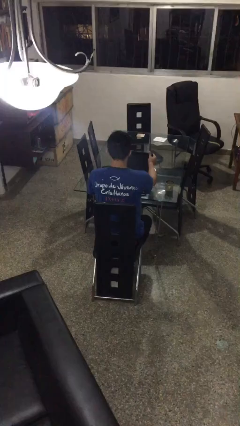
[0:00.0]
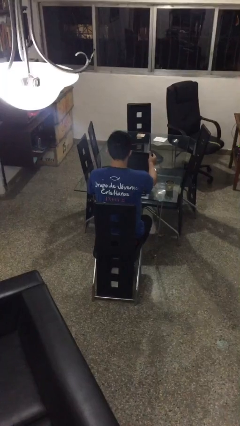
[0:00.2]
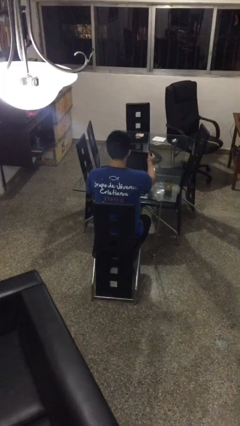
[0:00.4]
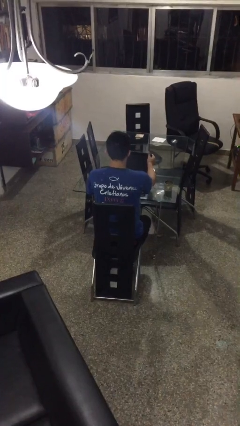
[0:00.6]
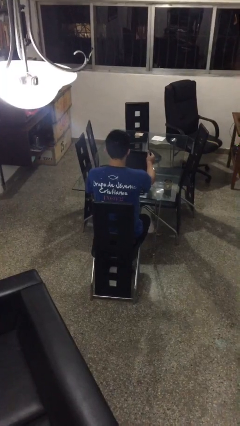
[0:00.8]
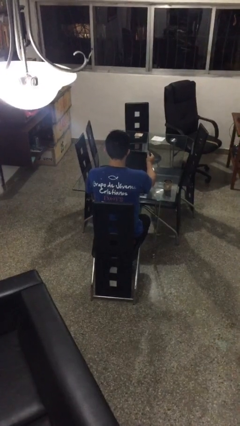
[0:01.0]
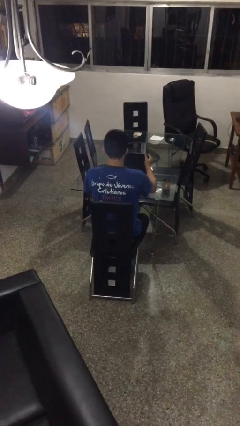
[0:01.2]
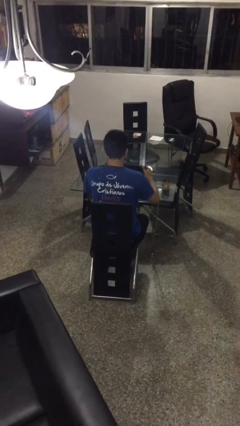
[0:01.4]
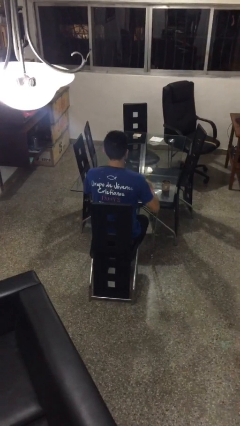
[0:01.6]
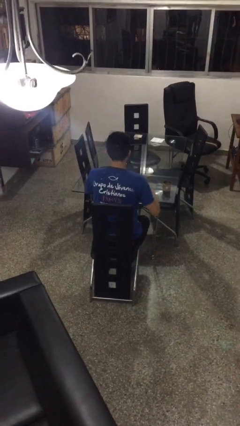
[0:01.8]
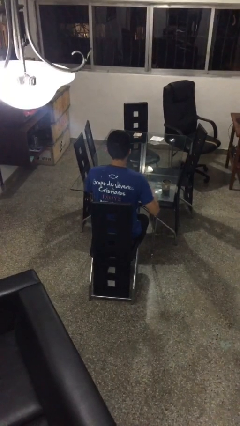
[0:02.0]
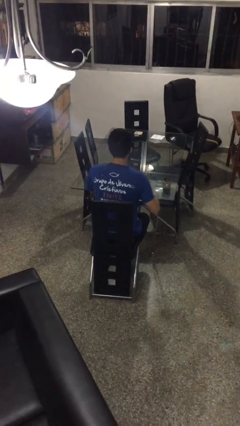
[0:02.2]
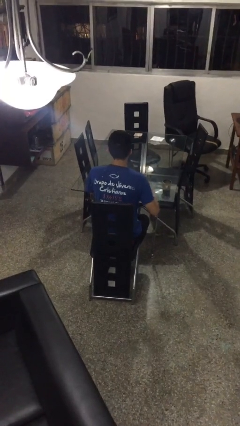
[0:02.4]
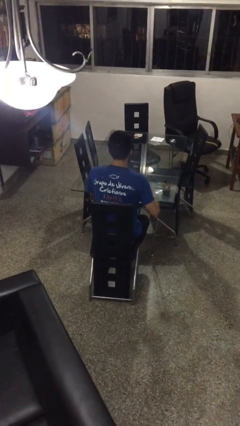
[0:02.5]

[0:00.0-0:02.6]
person closes laptop

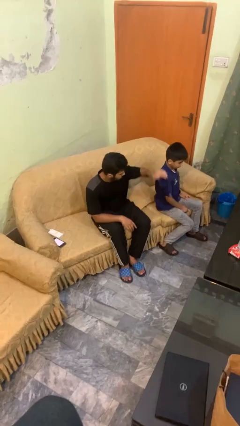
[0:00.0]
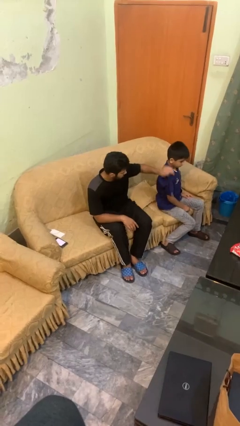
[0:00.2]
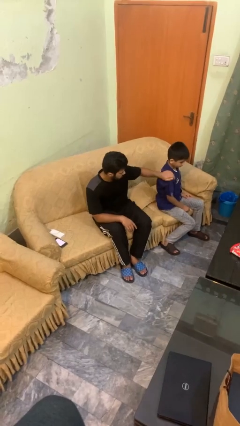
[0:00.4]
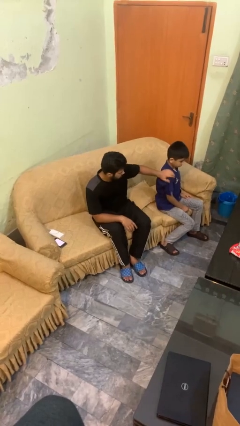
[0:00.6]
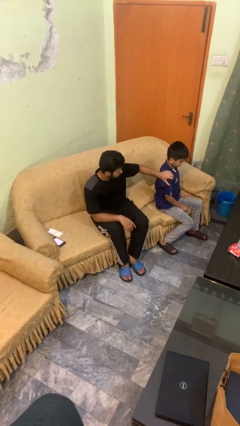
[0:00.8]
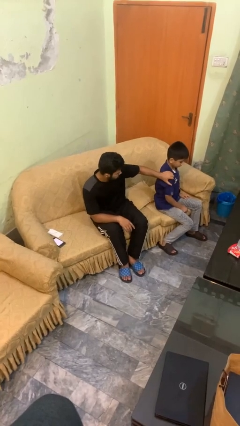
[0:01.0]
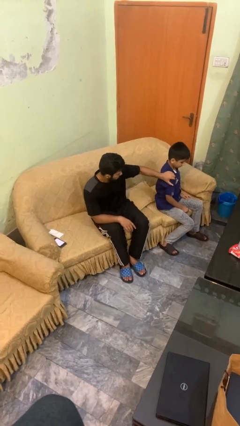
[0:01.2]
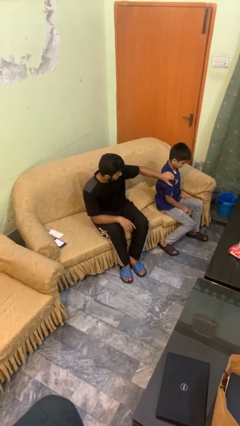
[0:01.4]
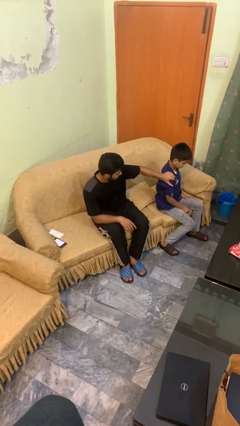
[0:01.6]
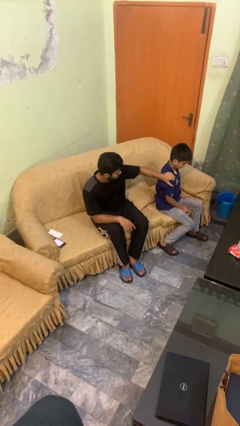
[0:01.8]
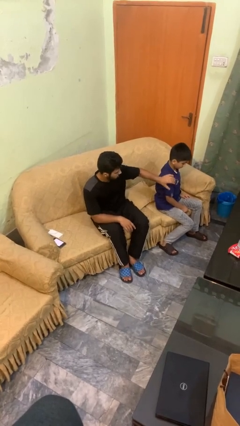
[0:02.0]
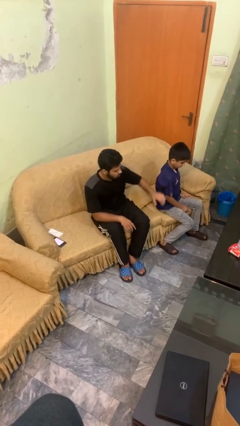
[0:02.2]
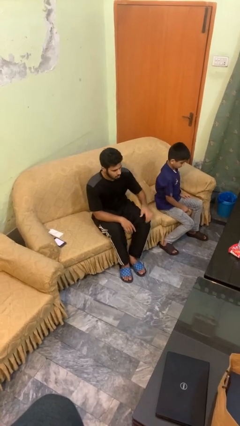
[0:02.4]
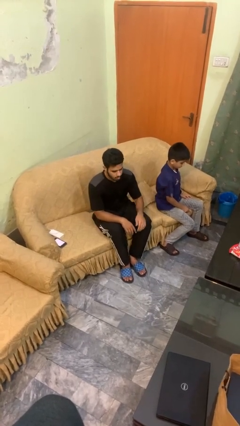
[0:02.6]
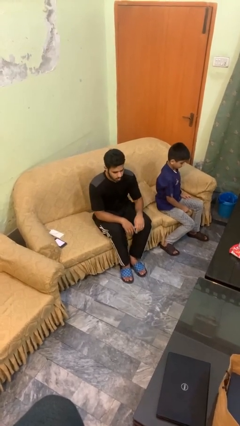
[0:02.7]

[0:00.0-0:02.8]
person pounds shoulders of person

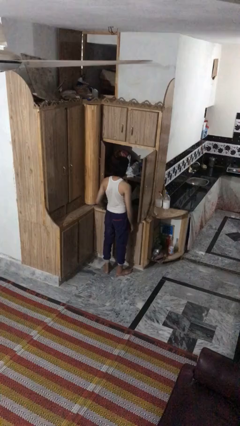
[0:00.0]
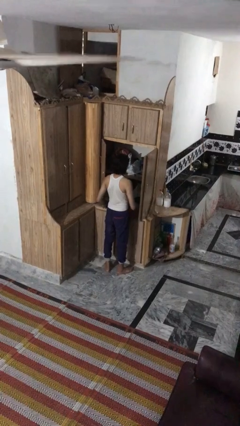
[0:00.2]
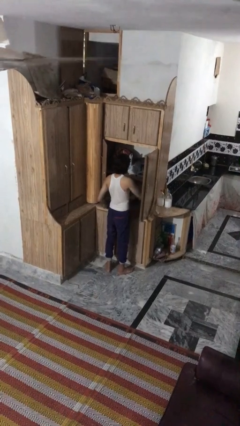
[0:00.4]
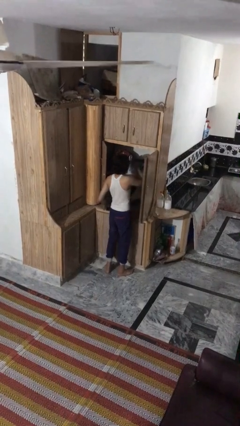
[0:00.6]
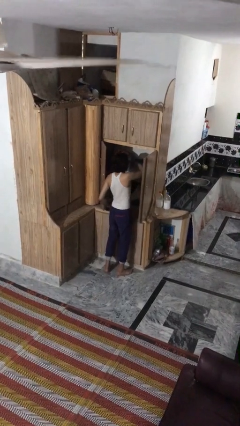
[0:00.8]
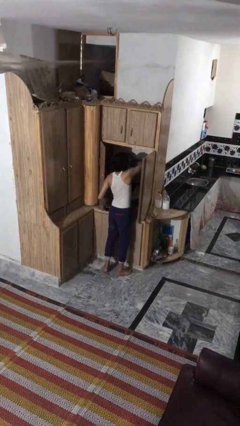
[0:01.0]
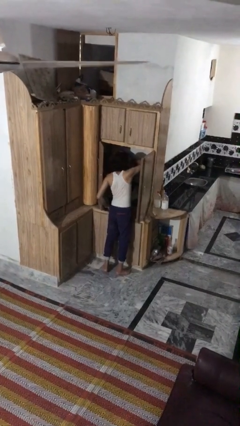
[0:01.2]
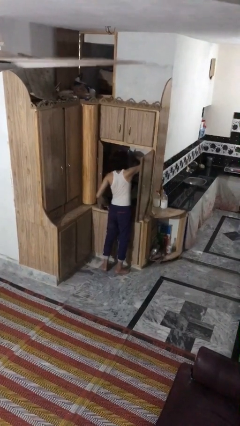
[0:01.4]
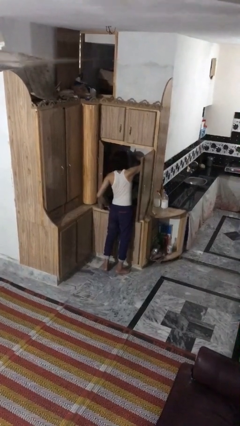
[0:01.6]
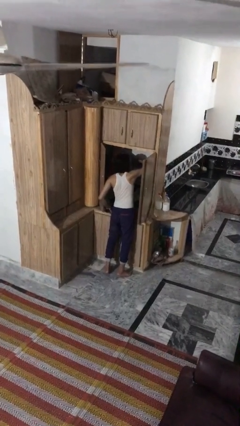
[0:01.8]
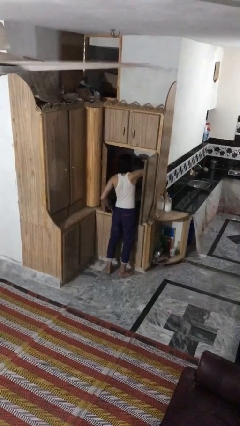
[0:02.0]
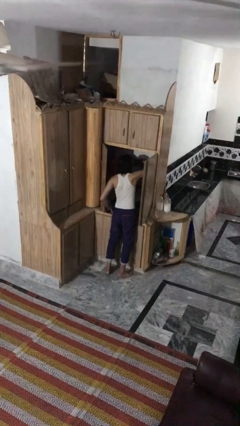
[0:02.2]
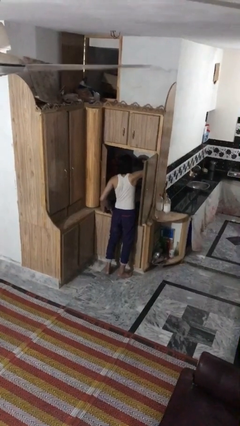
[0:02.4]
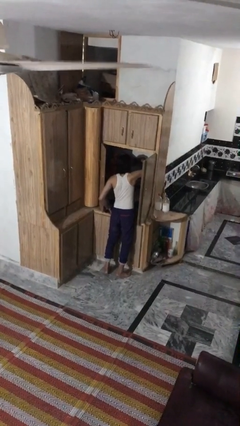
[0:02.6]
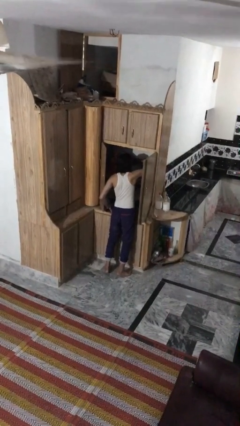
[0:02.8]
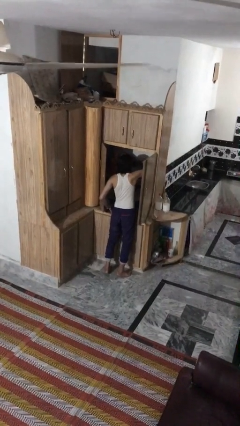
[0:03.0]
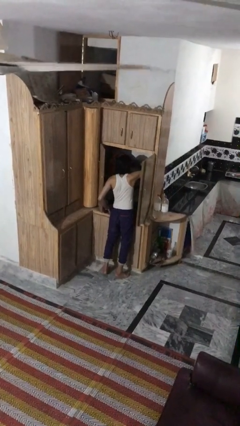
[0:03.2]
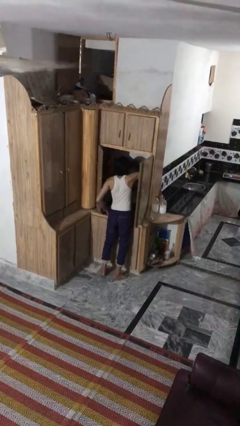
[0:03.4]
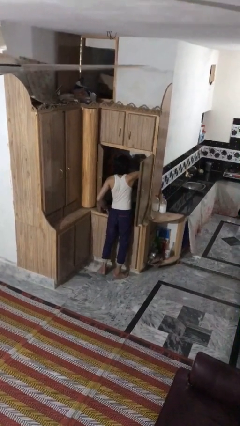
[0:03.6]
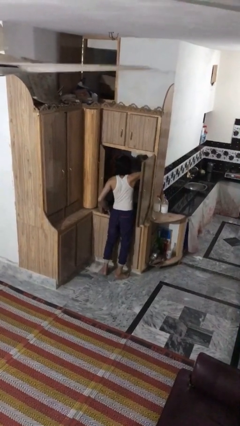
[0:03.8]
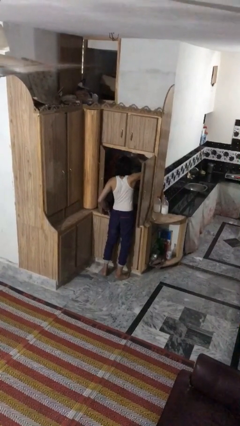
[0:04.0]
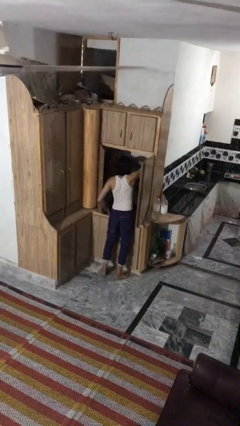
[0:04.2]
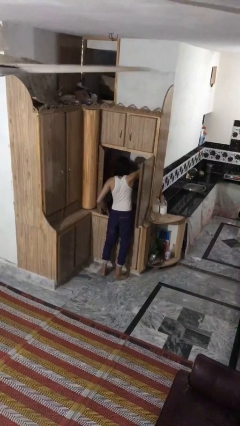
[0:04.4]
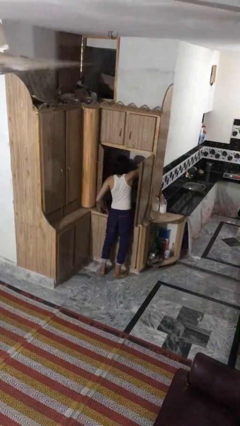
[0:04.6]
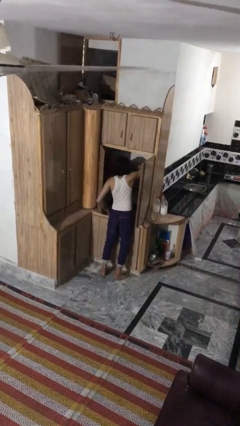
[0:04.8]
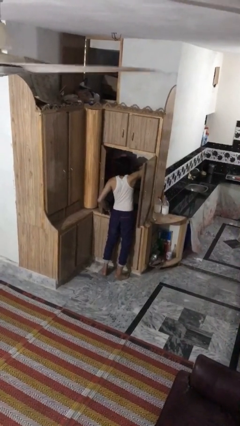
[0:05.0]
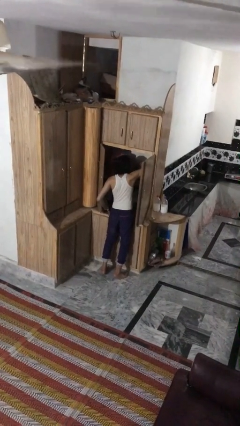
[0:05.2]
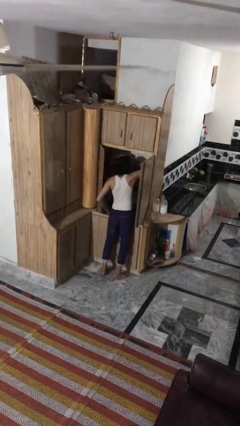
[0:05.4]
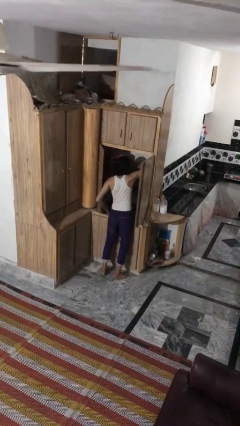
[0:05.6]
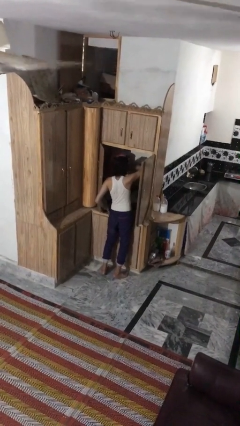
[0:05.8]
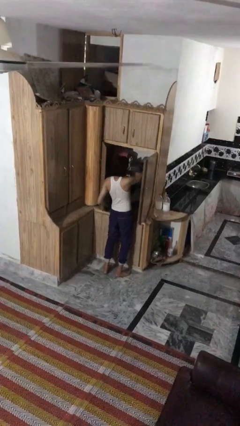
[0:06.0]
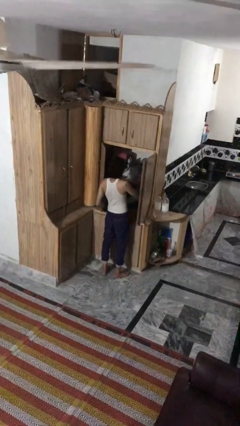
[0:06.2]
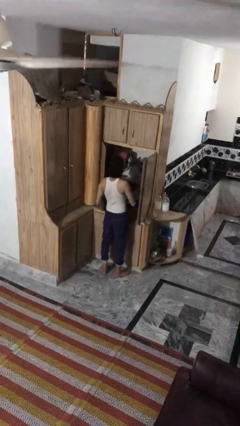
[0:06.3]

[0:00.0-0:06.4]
person searches in cabinet

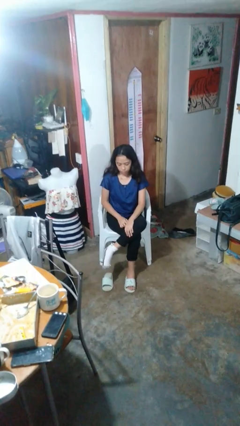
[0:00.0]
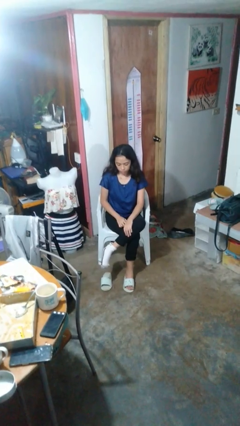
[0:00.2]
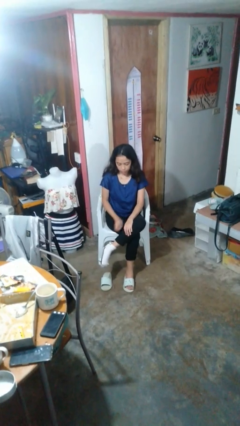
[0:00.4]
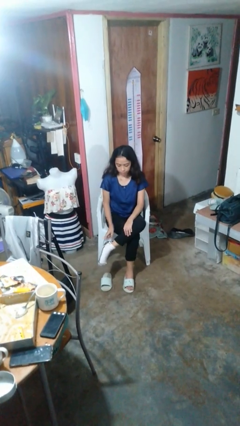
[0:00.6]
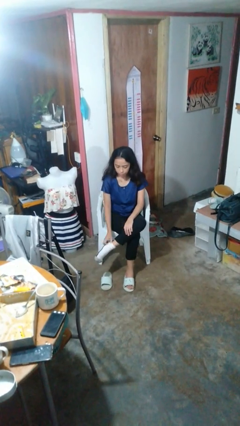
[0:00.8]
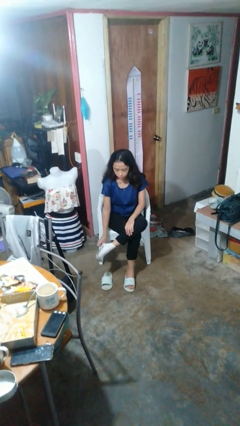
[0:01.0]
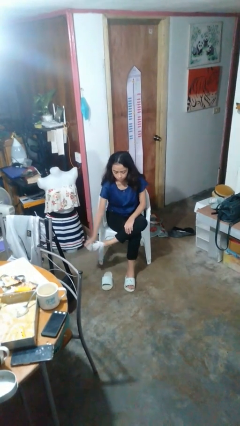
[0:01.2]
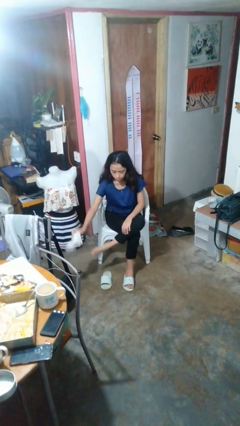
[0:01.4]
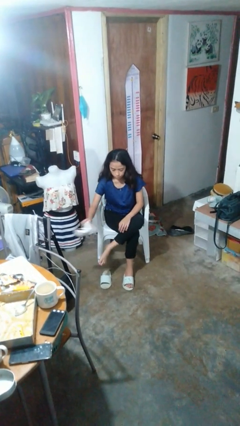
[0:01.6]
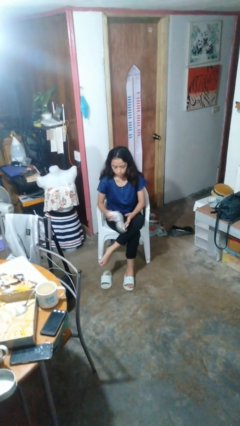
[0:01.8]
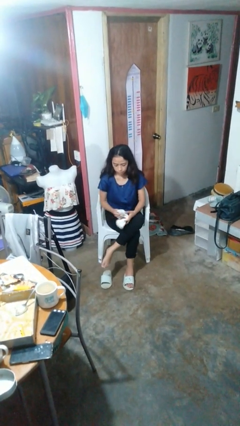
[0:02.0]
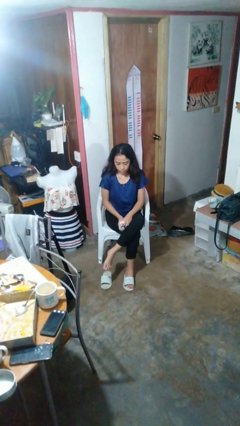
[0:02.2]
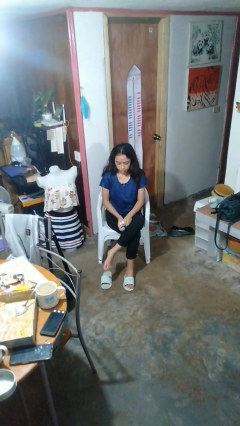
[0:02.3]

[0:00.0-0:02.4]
person takes off socks

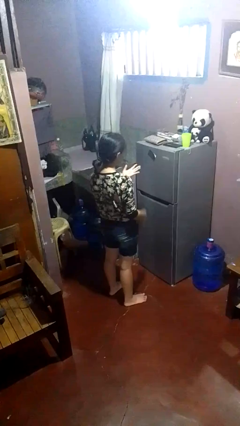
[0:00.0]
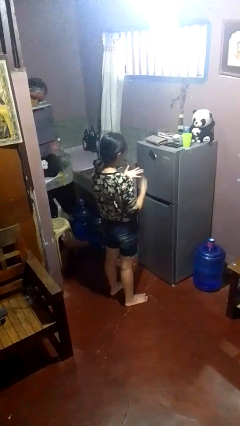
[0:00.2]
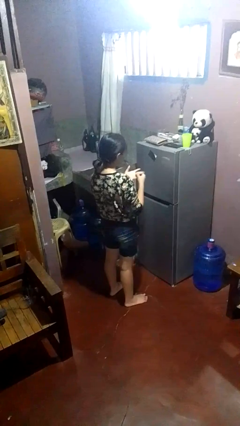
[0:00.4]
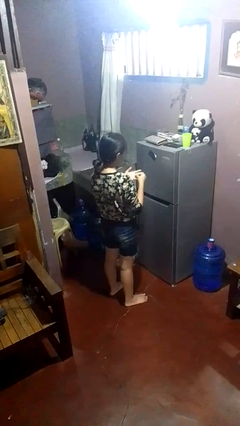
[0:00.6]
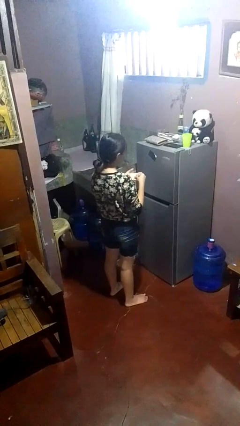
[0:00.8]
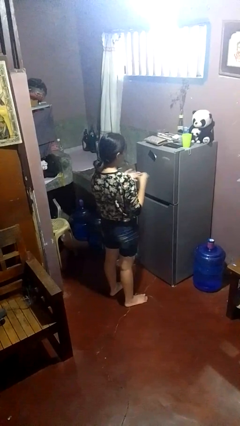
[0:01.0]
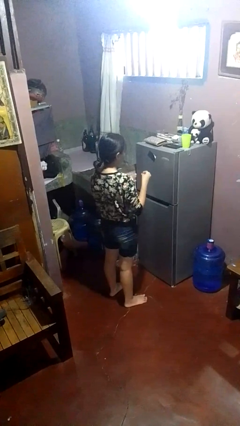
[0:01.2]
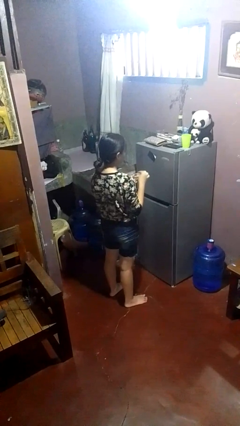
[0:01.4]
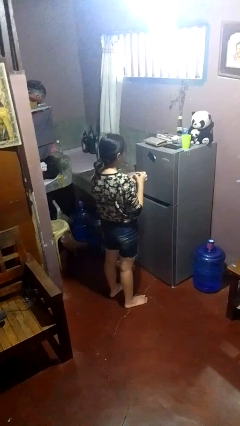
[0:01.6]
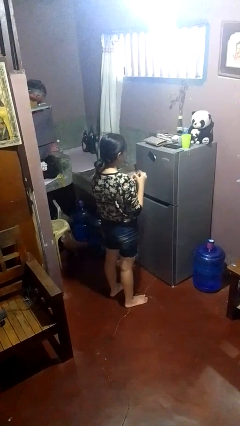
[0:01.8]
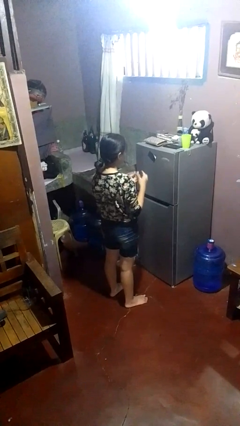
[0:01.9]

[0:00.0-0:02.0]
person takes off ring

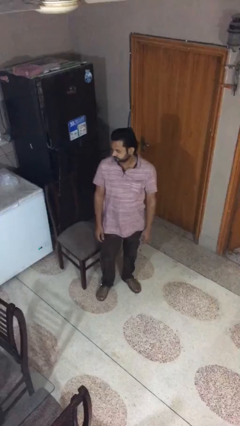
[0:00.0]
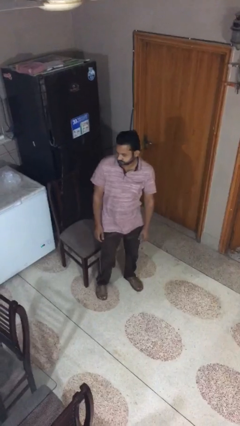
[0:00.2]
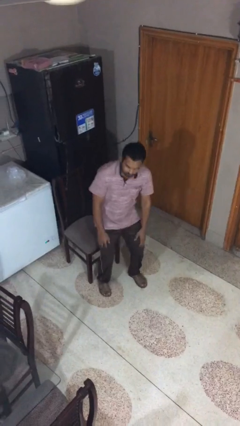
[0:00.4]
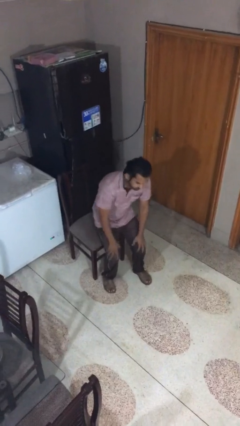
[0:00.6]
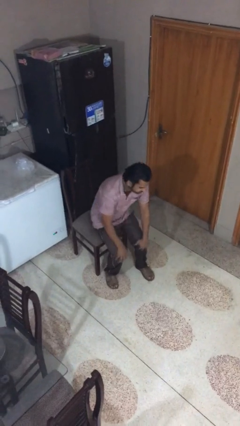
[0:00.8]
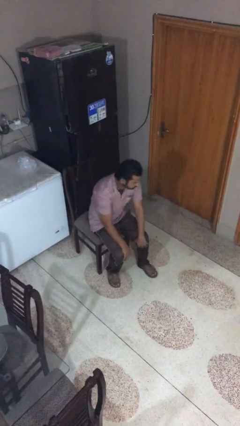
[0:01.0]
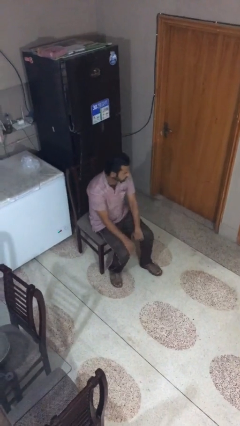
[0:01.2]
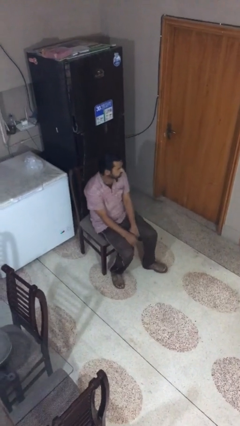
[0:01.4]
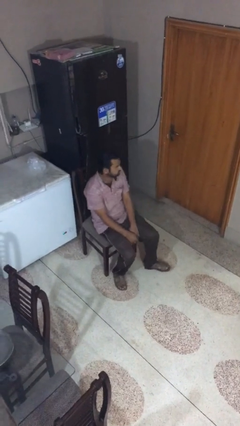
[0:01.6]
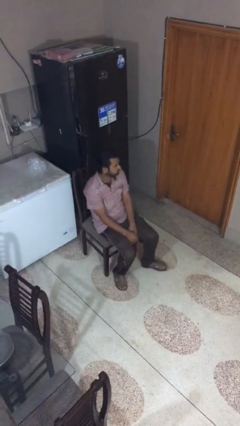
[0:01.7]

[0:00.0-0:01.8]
person sits down
